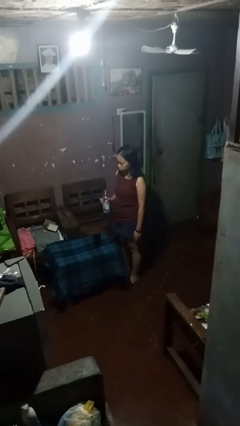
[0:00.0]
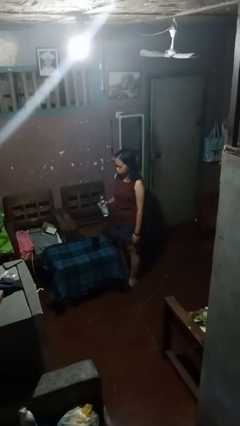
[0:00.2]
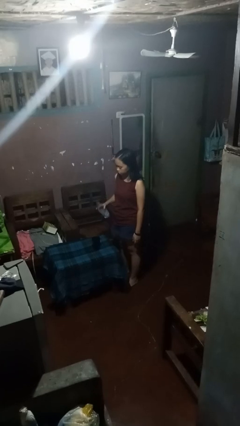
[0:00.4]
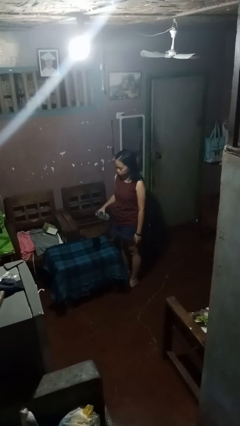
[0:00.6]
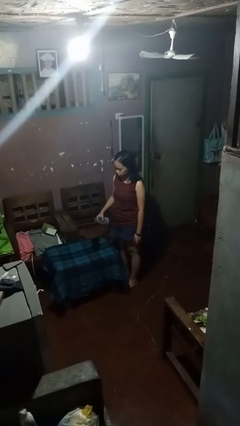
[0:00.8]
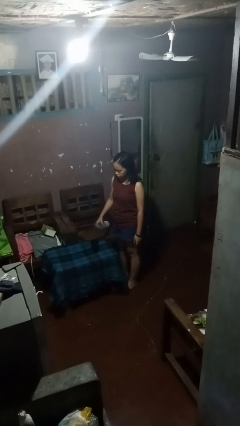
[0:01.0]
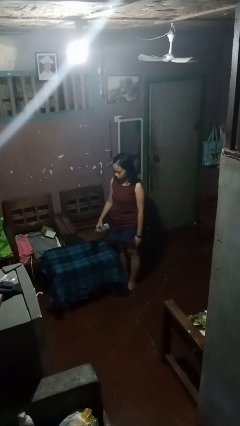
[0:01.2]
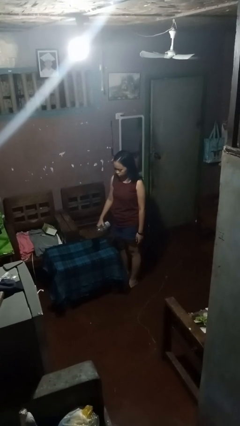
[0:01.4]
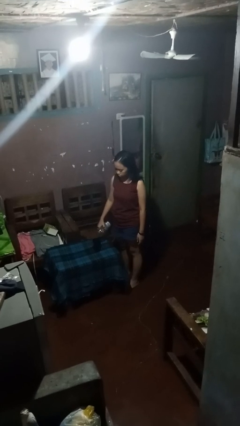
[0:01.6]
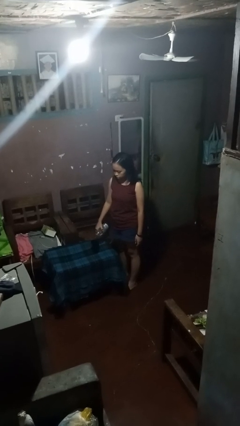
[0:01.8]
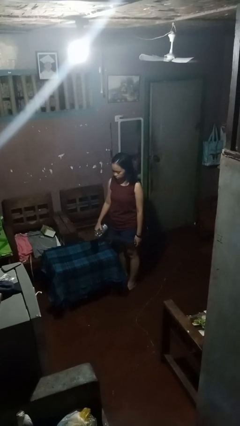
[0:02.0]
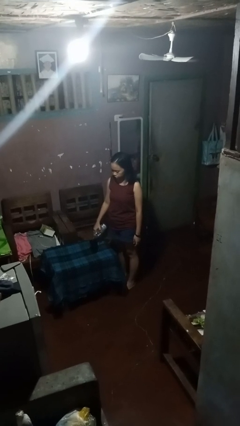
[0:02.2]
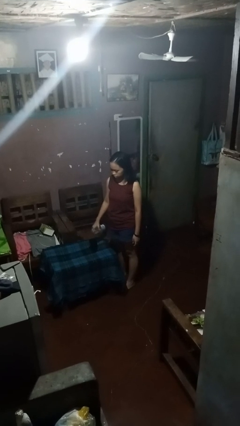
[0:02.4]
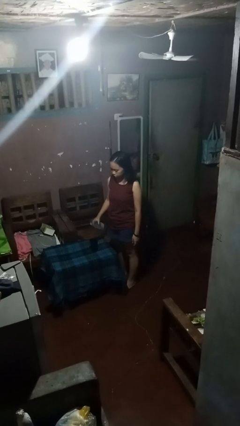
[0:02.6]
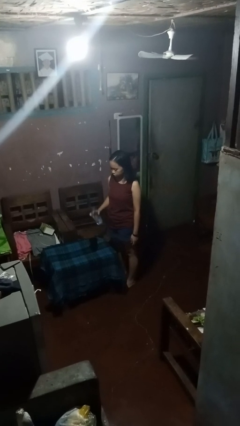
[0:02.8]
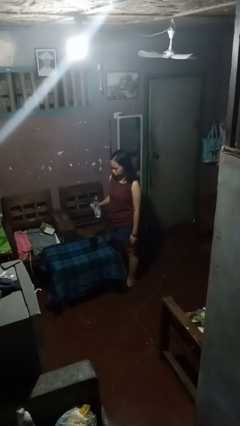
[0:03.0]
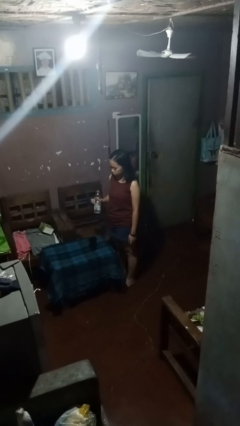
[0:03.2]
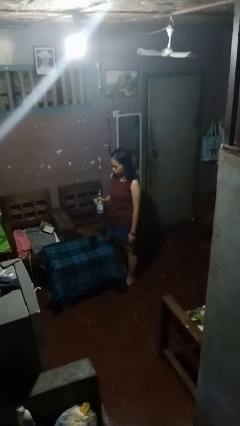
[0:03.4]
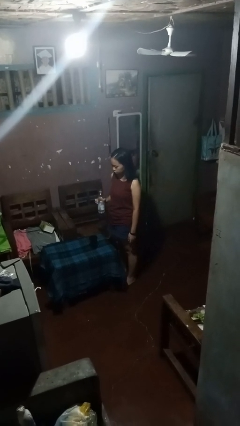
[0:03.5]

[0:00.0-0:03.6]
person pours liquid into cup

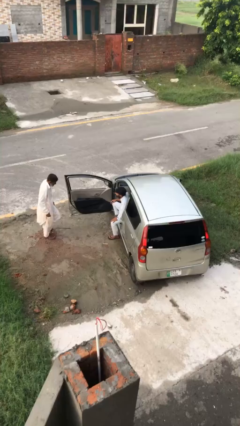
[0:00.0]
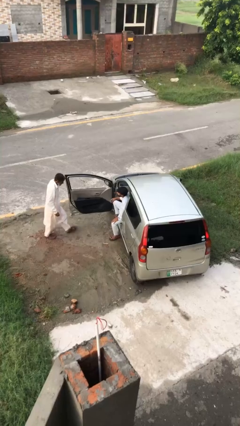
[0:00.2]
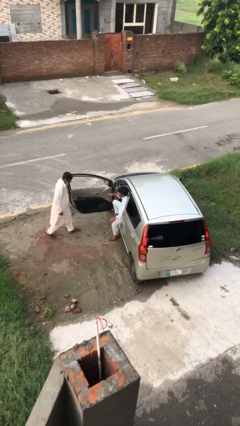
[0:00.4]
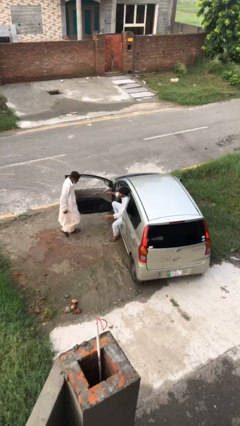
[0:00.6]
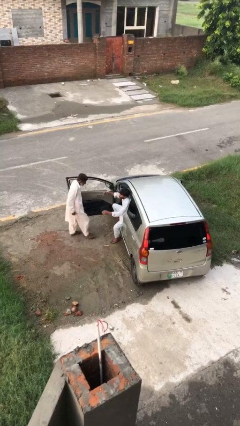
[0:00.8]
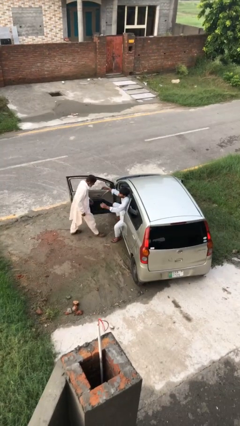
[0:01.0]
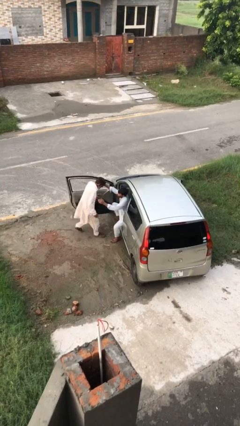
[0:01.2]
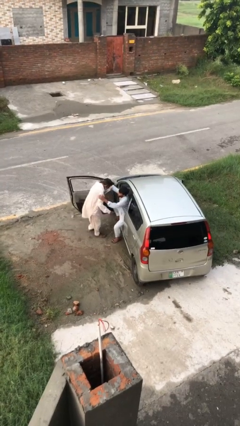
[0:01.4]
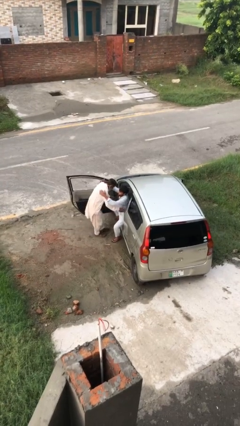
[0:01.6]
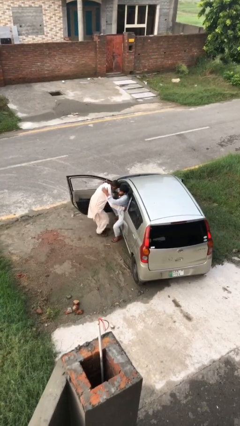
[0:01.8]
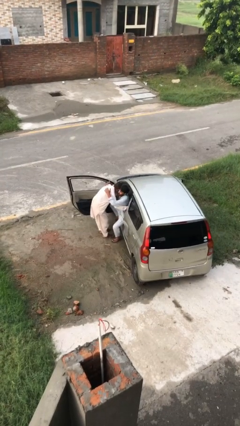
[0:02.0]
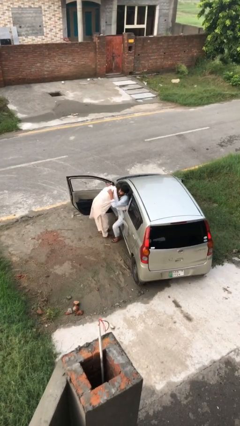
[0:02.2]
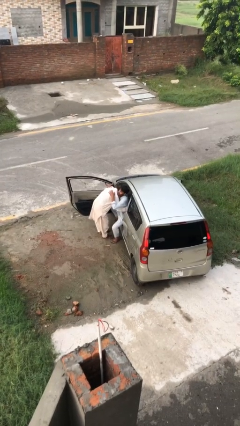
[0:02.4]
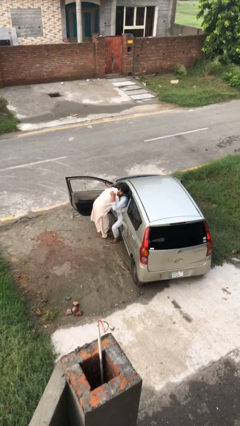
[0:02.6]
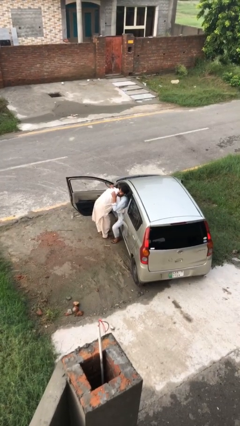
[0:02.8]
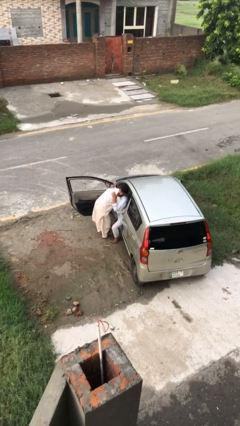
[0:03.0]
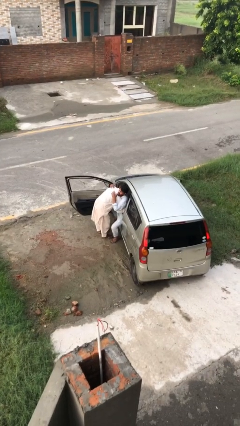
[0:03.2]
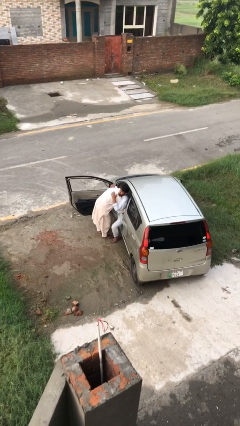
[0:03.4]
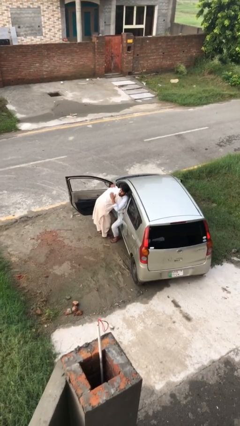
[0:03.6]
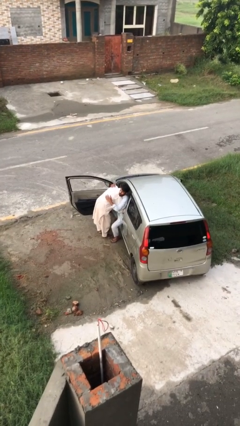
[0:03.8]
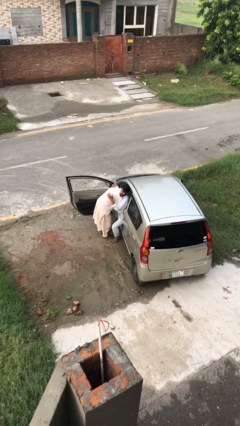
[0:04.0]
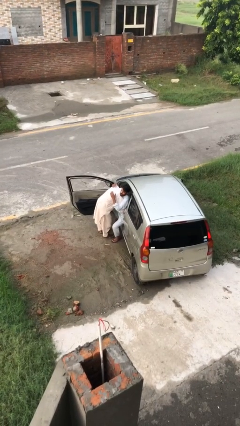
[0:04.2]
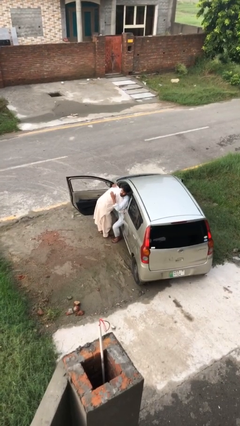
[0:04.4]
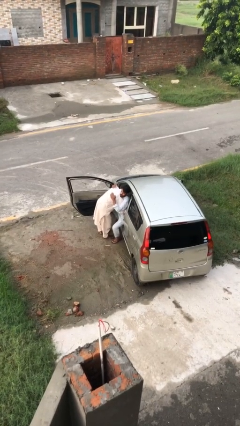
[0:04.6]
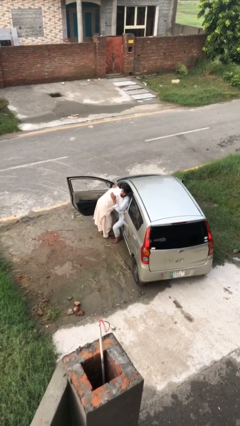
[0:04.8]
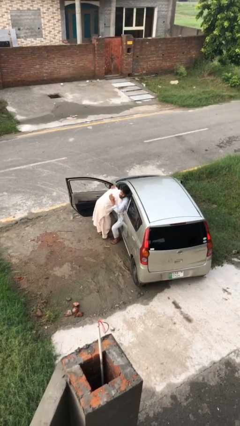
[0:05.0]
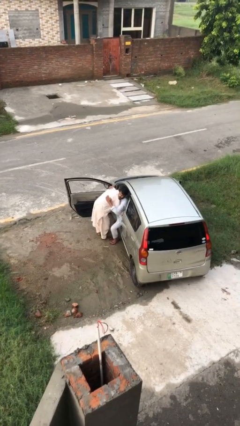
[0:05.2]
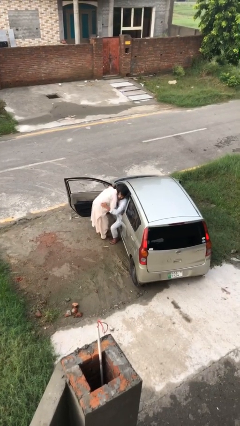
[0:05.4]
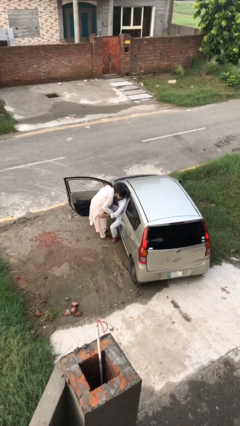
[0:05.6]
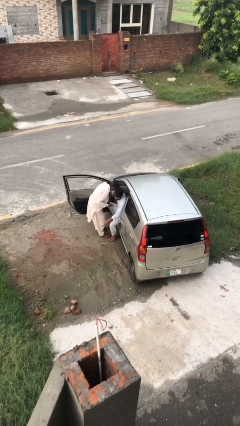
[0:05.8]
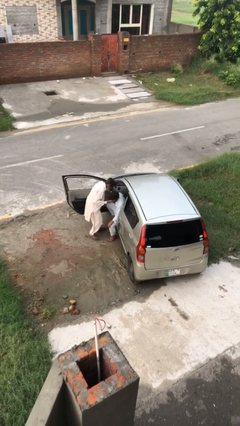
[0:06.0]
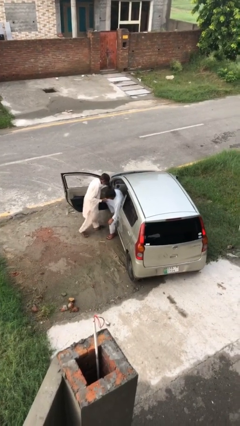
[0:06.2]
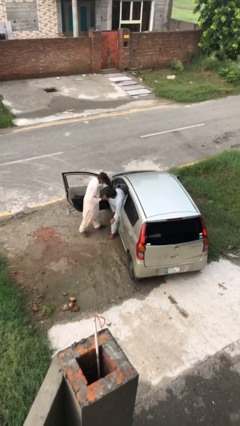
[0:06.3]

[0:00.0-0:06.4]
person embraces person

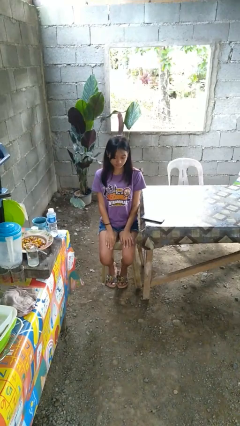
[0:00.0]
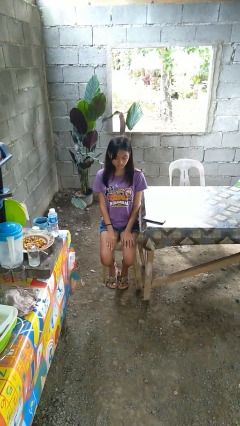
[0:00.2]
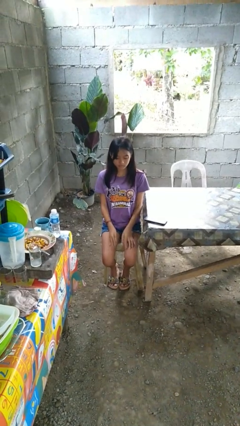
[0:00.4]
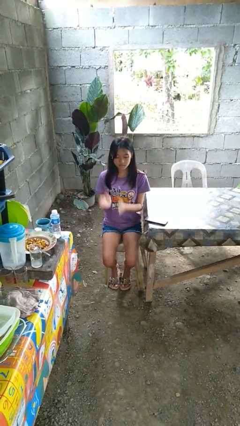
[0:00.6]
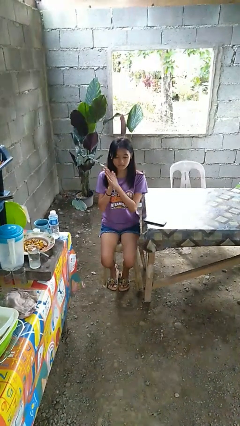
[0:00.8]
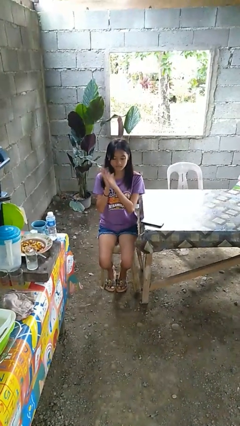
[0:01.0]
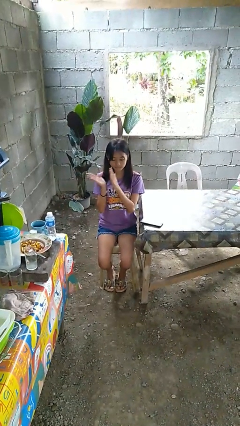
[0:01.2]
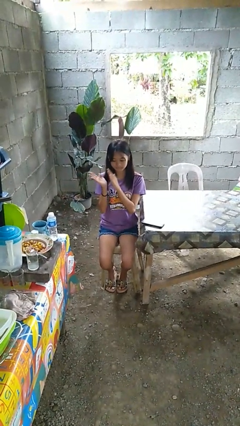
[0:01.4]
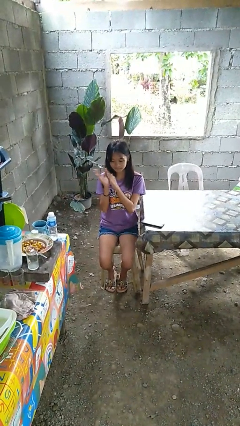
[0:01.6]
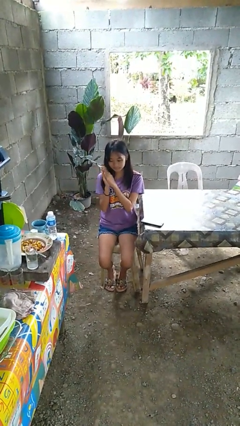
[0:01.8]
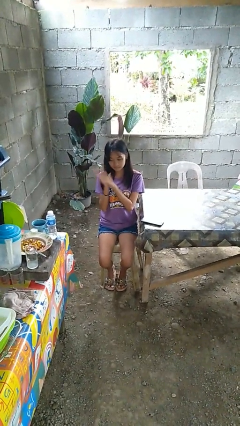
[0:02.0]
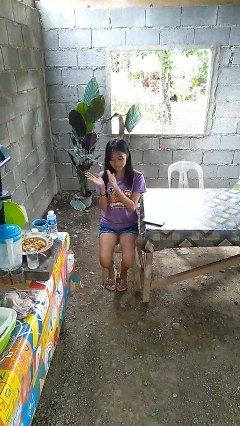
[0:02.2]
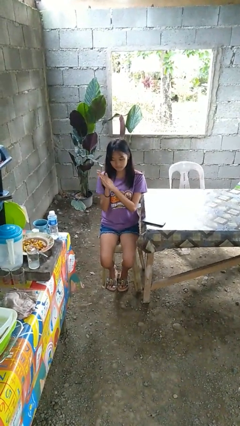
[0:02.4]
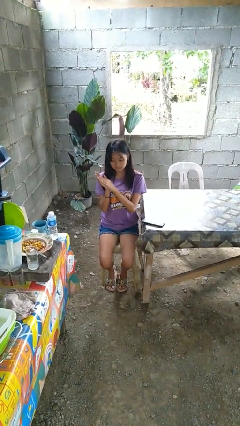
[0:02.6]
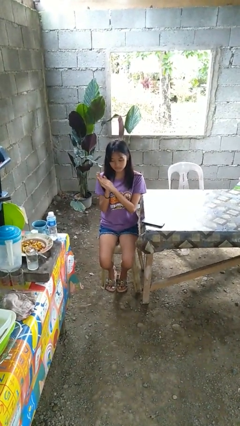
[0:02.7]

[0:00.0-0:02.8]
person claps hands

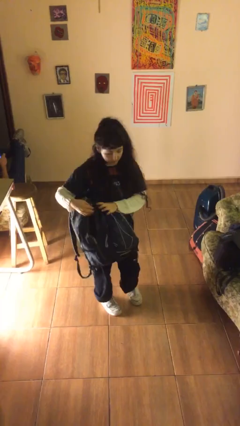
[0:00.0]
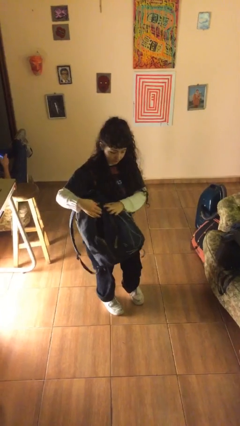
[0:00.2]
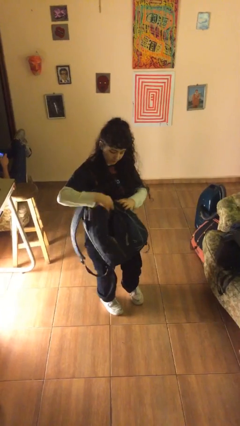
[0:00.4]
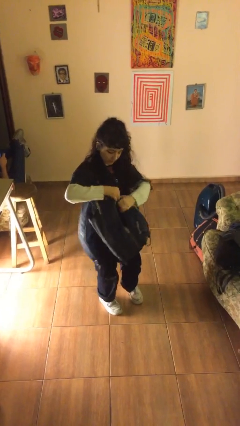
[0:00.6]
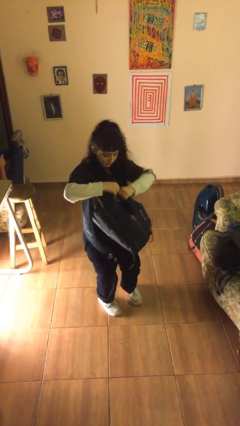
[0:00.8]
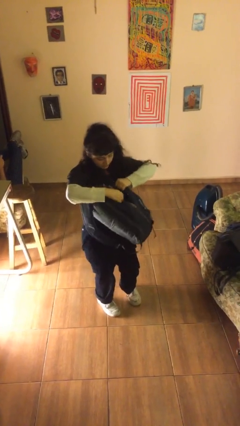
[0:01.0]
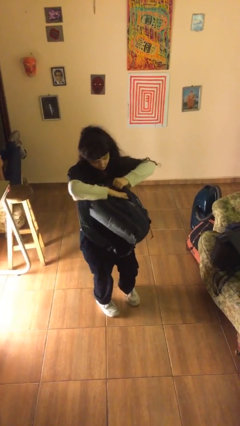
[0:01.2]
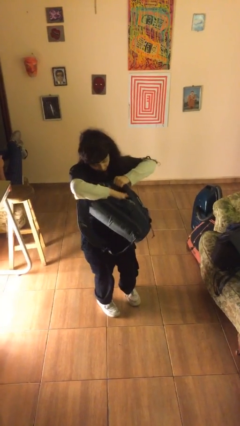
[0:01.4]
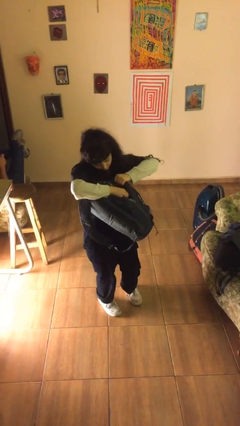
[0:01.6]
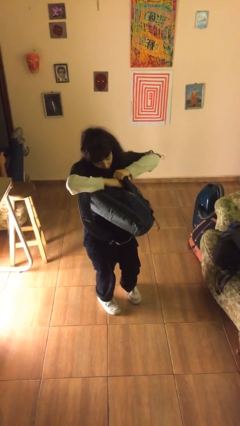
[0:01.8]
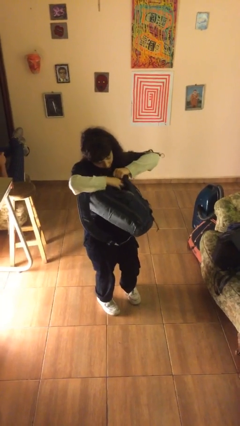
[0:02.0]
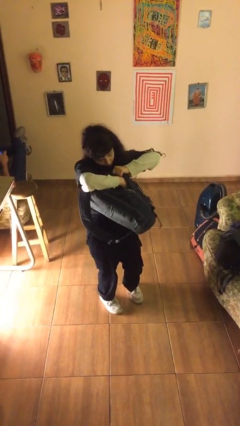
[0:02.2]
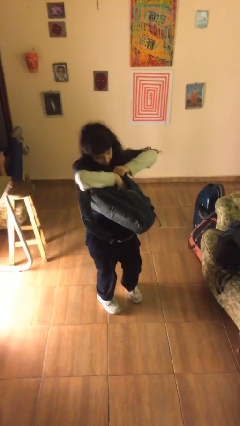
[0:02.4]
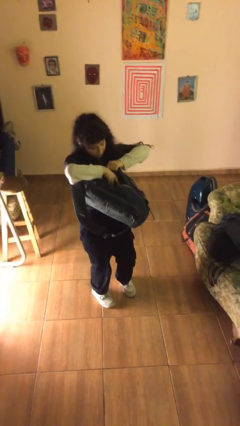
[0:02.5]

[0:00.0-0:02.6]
person searches in backpack

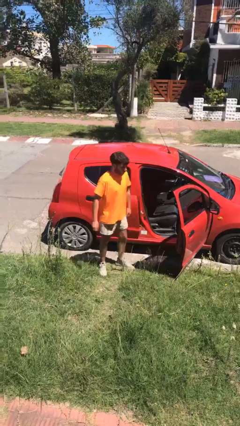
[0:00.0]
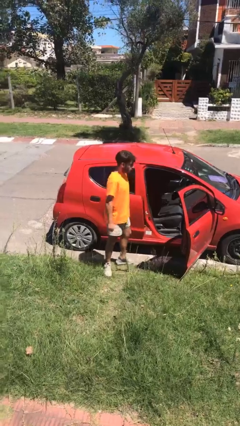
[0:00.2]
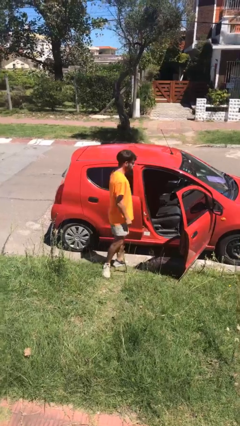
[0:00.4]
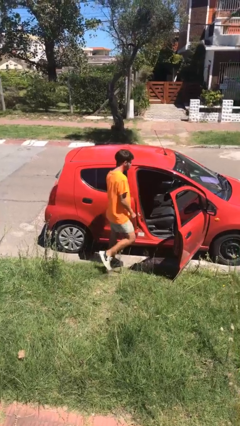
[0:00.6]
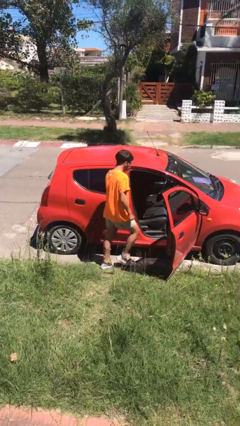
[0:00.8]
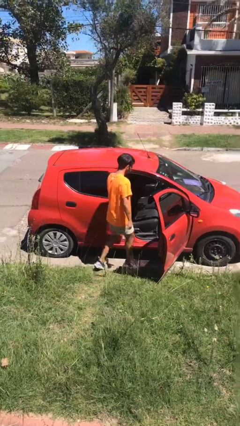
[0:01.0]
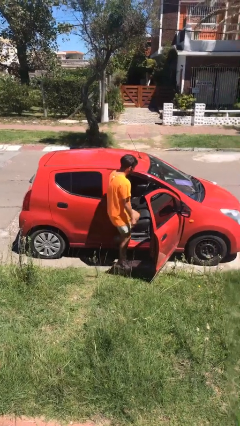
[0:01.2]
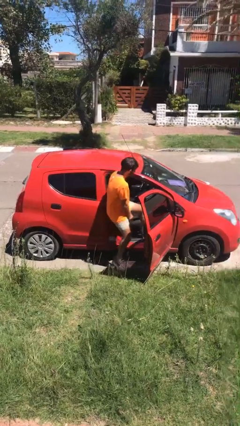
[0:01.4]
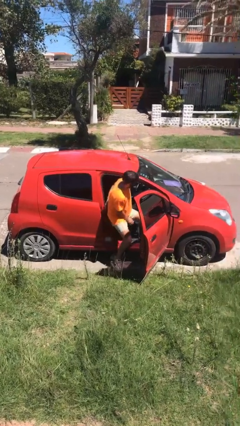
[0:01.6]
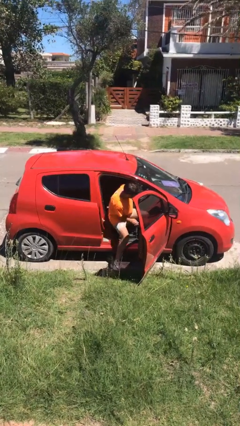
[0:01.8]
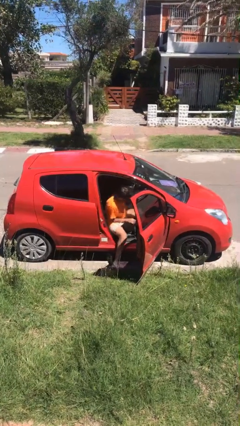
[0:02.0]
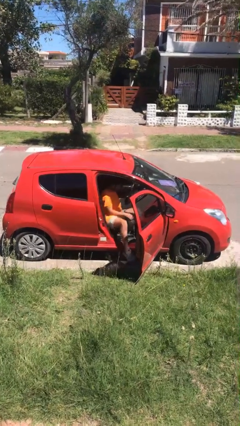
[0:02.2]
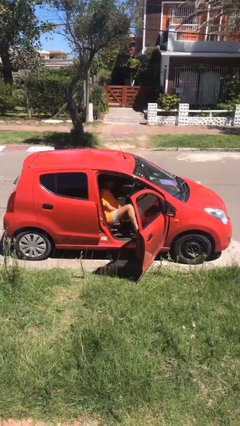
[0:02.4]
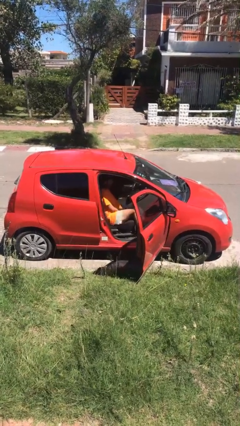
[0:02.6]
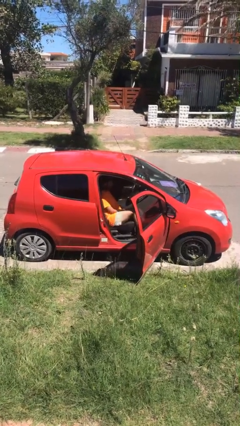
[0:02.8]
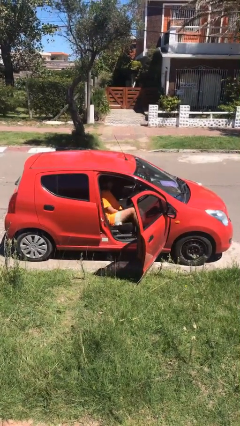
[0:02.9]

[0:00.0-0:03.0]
person enters car
